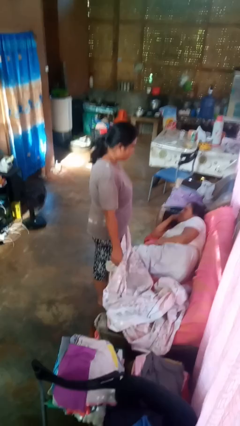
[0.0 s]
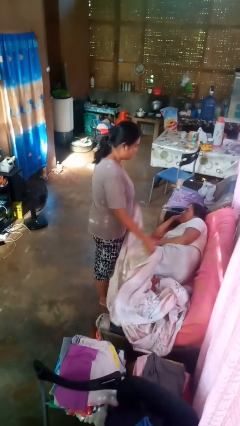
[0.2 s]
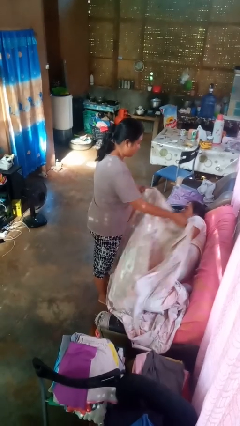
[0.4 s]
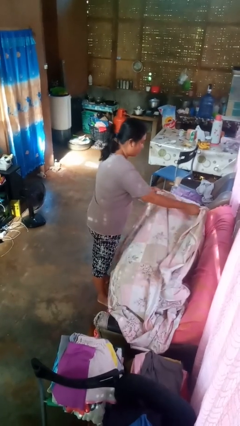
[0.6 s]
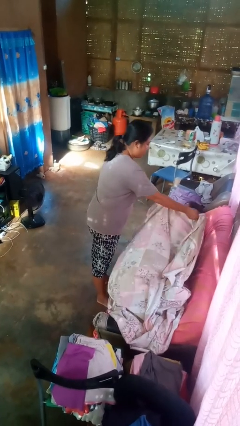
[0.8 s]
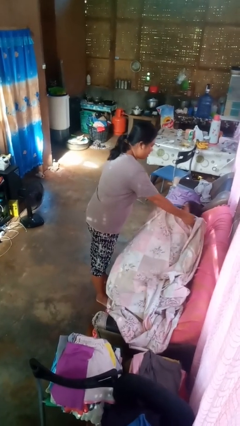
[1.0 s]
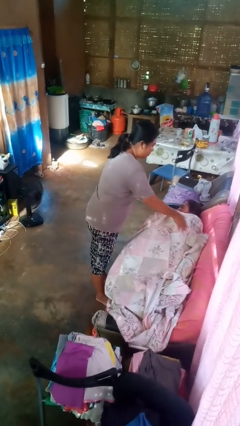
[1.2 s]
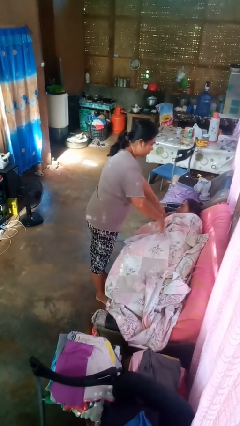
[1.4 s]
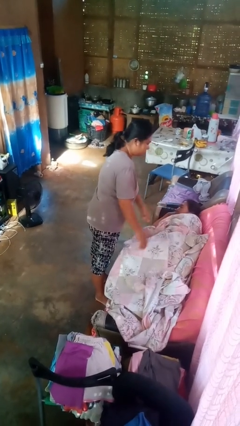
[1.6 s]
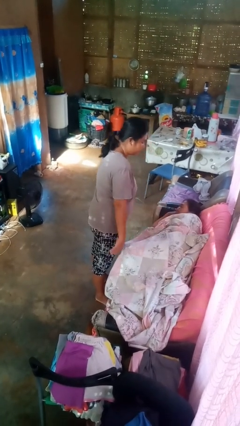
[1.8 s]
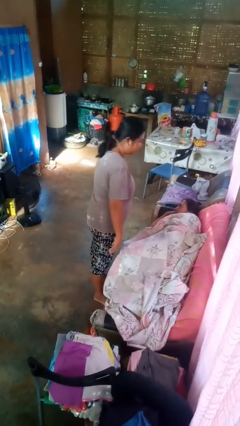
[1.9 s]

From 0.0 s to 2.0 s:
person covers friend with blanket

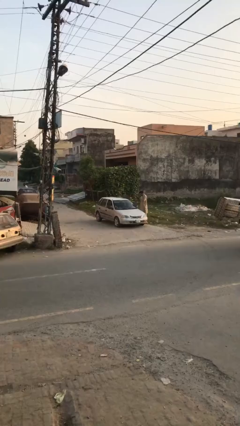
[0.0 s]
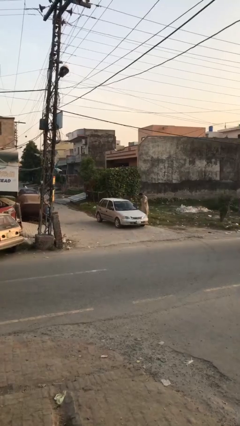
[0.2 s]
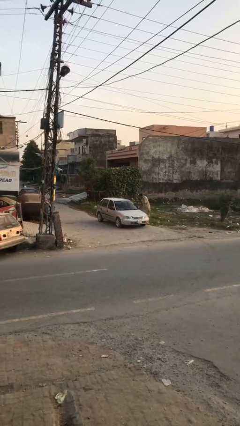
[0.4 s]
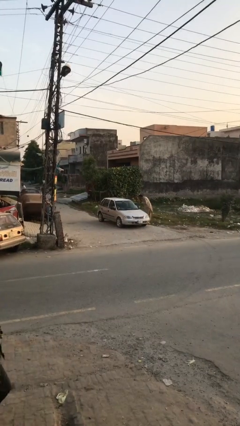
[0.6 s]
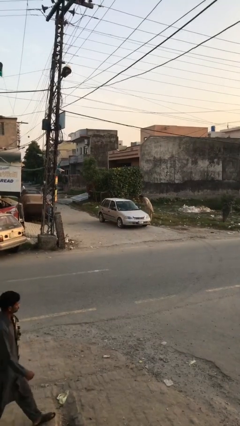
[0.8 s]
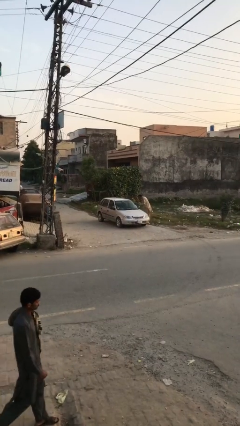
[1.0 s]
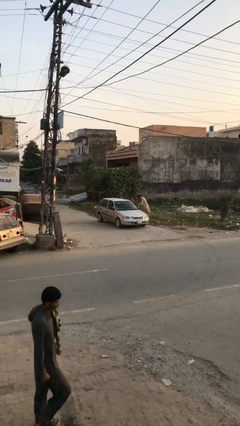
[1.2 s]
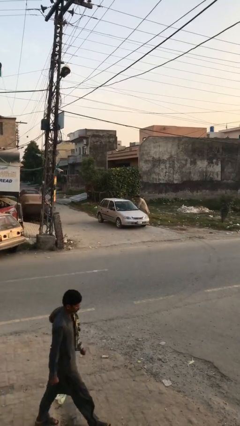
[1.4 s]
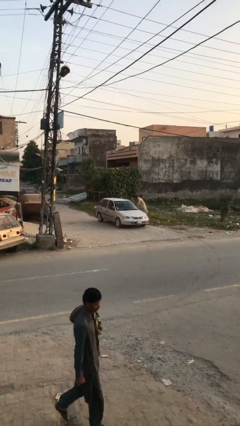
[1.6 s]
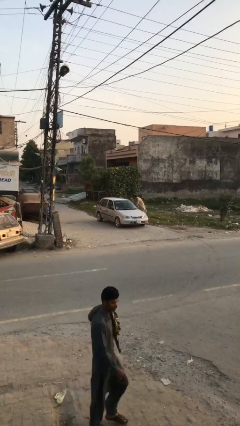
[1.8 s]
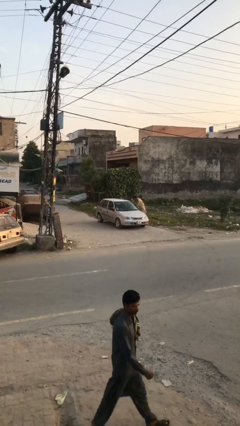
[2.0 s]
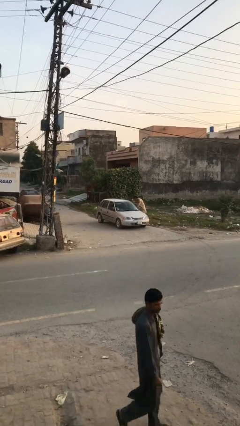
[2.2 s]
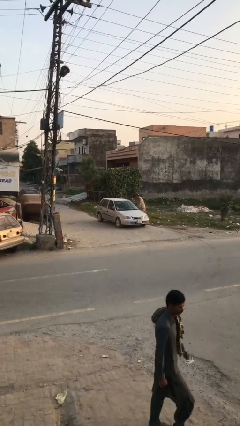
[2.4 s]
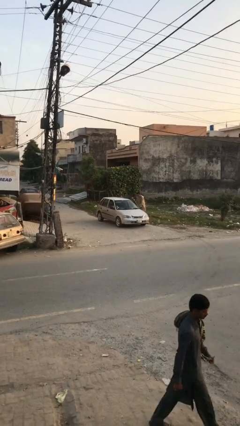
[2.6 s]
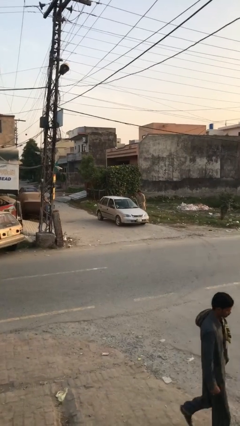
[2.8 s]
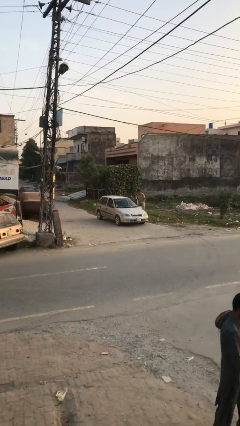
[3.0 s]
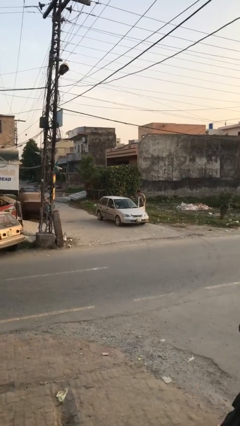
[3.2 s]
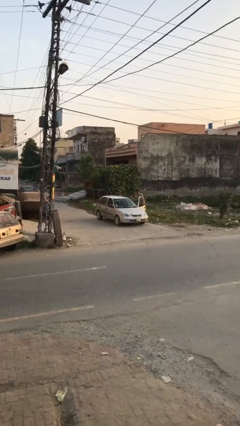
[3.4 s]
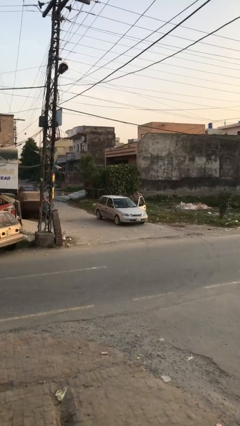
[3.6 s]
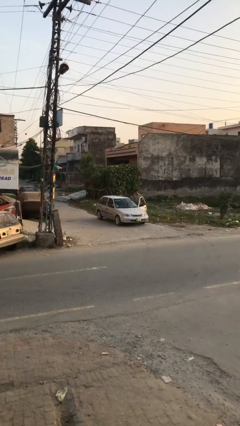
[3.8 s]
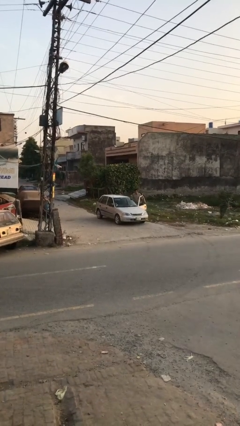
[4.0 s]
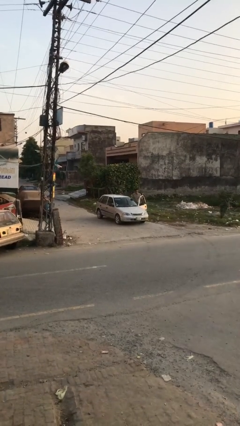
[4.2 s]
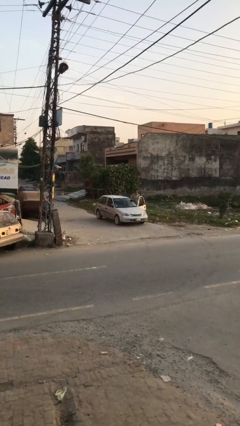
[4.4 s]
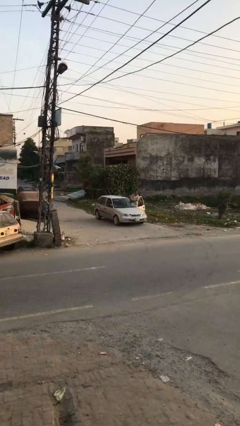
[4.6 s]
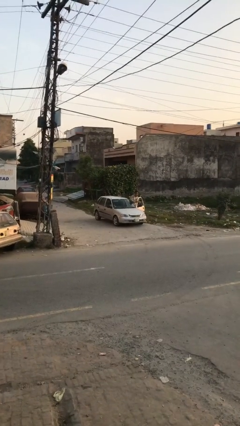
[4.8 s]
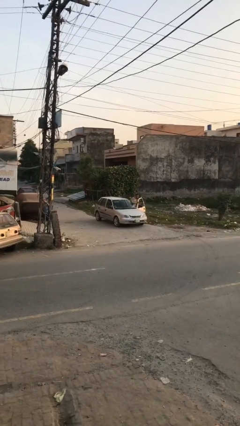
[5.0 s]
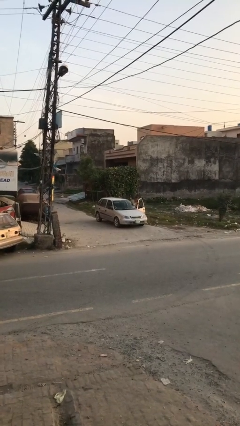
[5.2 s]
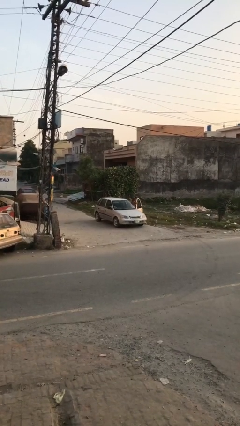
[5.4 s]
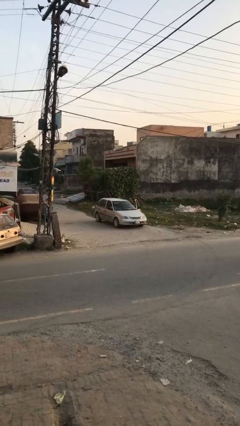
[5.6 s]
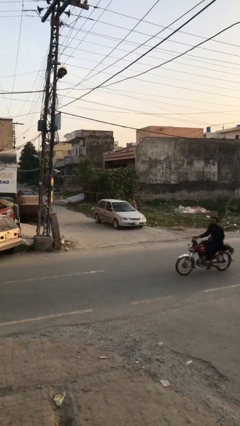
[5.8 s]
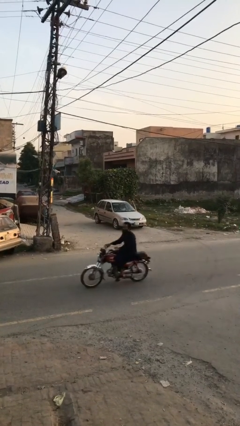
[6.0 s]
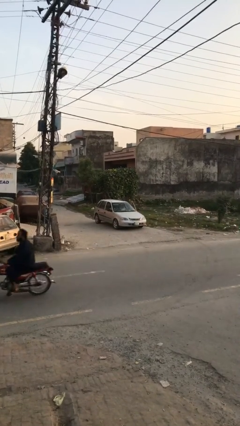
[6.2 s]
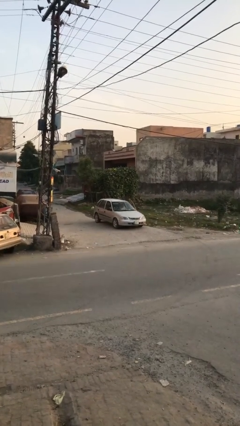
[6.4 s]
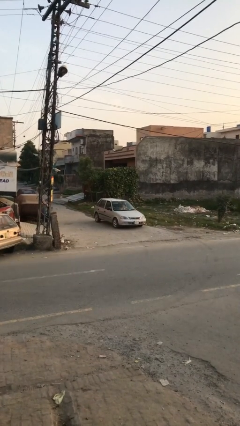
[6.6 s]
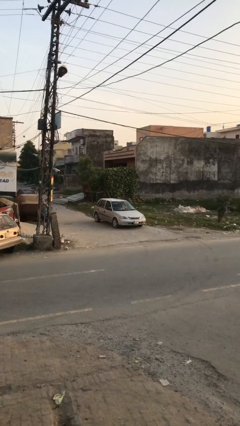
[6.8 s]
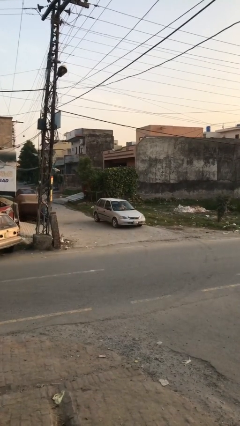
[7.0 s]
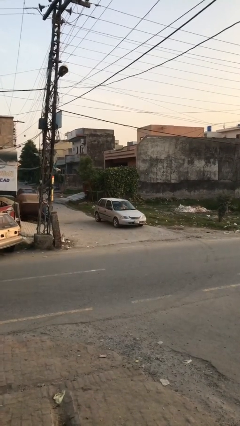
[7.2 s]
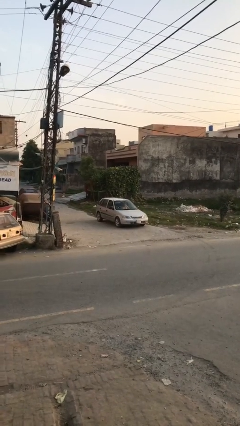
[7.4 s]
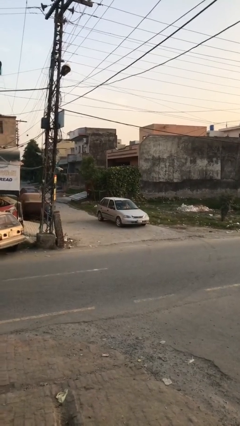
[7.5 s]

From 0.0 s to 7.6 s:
car picks up person

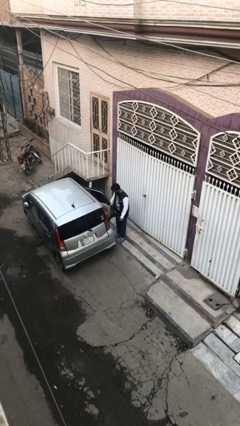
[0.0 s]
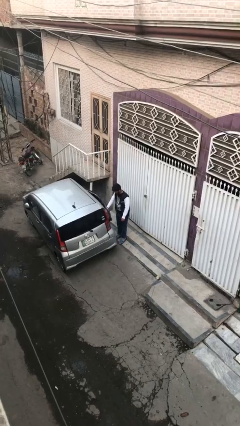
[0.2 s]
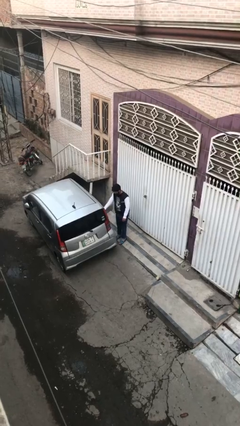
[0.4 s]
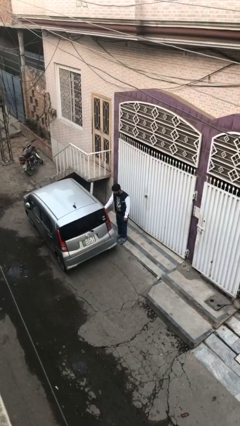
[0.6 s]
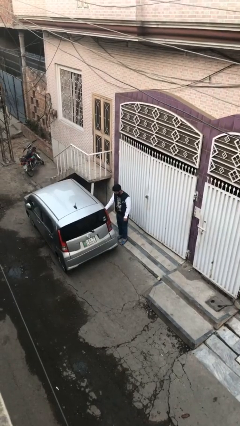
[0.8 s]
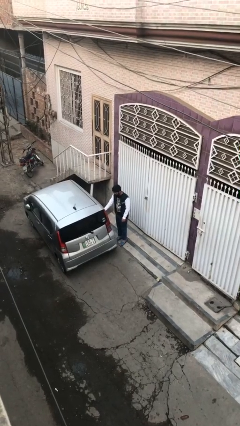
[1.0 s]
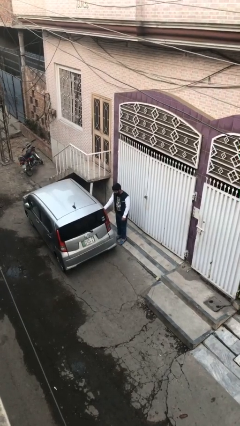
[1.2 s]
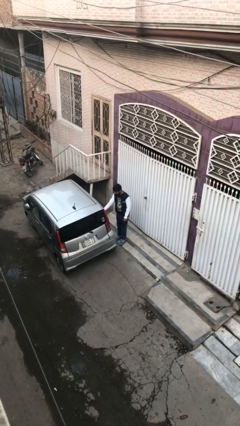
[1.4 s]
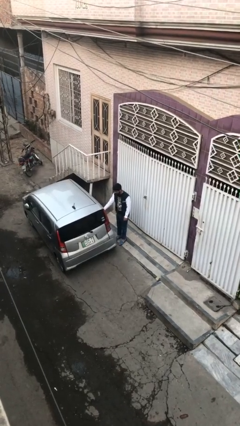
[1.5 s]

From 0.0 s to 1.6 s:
person closes car door

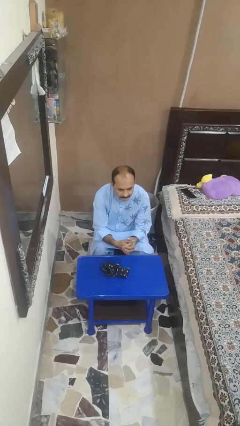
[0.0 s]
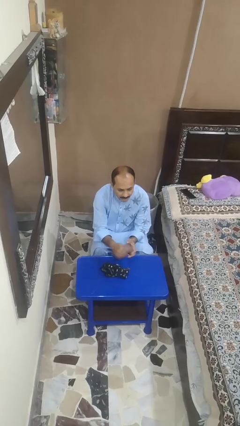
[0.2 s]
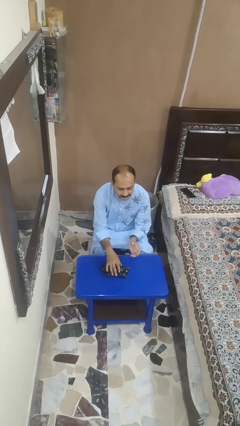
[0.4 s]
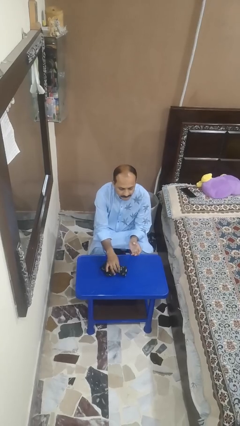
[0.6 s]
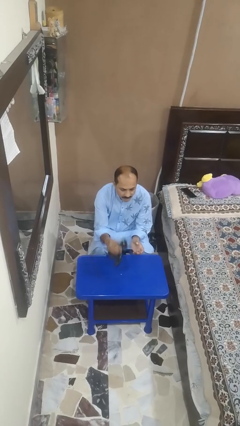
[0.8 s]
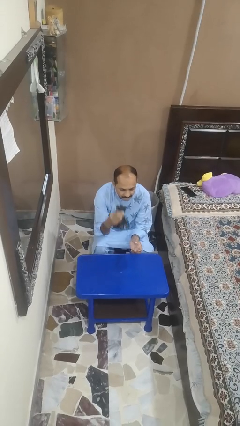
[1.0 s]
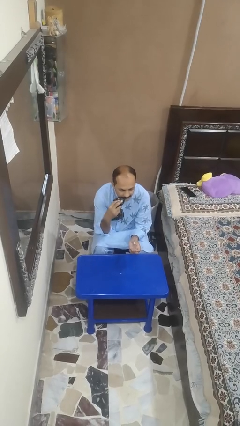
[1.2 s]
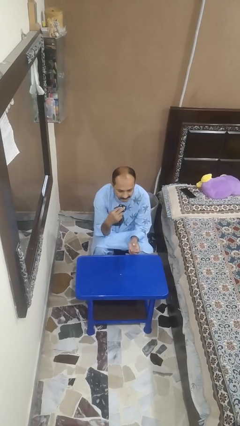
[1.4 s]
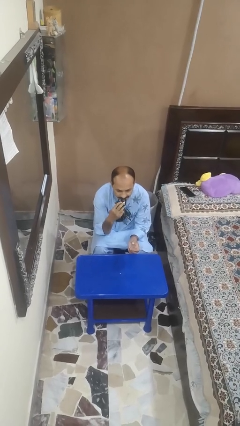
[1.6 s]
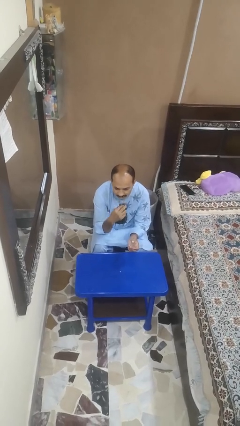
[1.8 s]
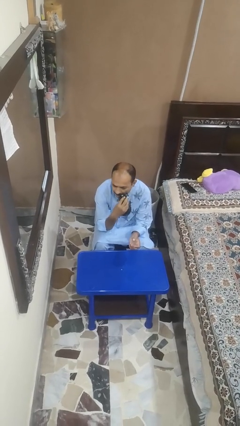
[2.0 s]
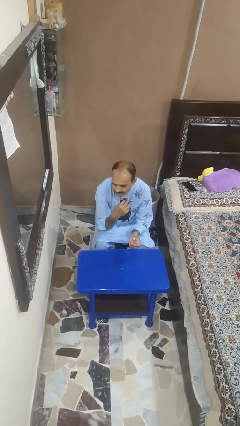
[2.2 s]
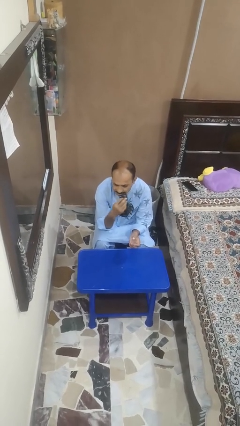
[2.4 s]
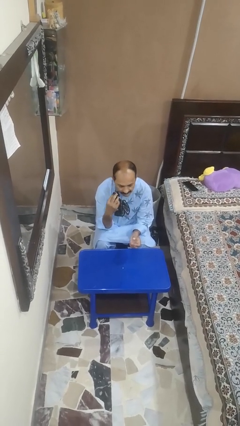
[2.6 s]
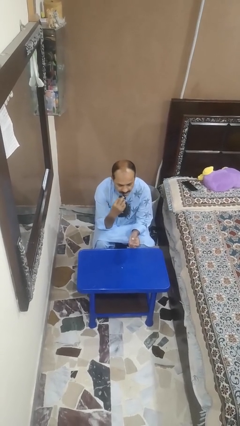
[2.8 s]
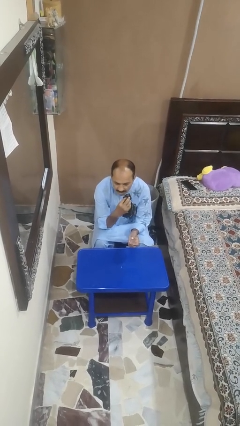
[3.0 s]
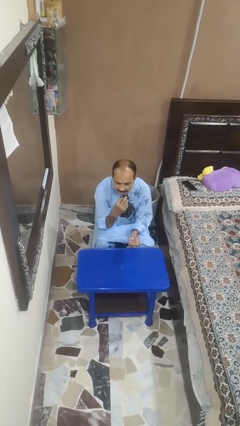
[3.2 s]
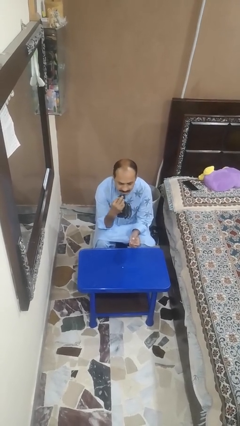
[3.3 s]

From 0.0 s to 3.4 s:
person wipes mouth with napkin

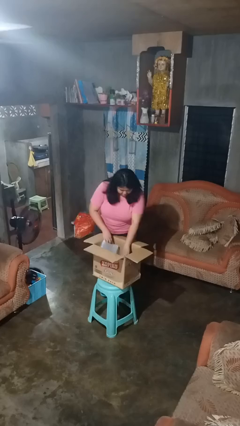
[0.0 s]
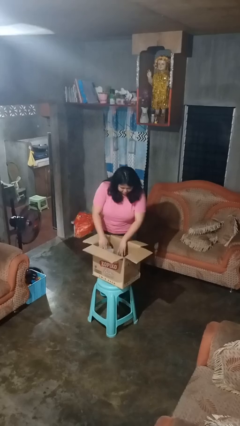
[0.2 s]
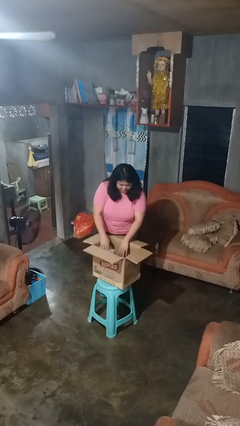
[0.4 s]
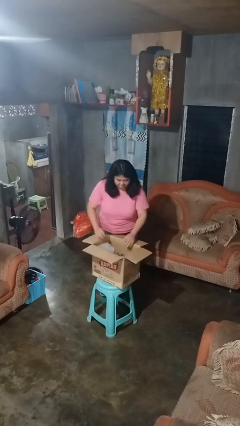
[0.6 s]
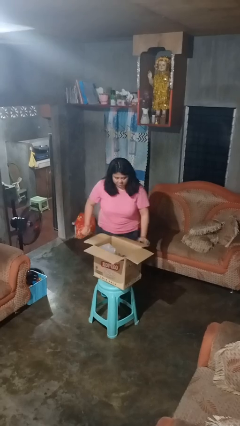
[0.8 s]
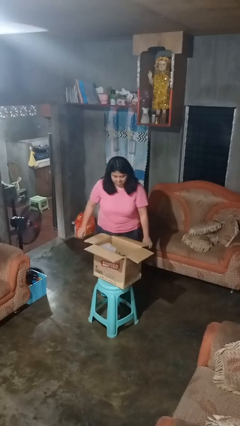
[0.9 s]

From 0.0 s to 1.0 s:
person searches in box

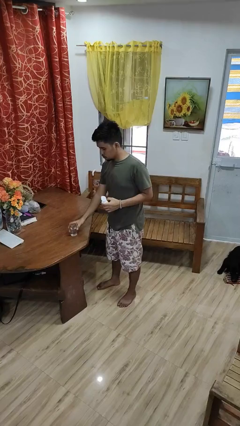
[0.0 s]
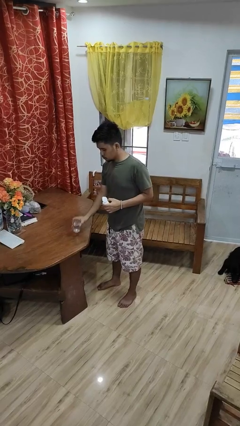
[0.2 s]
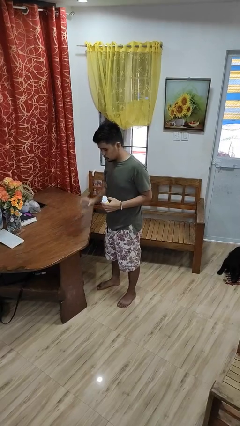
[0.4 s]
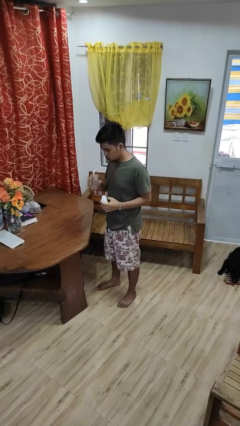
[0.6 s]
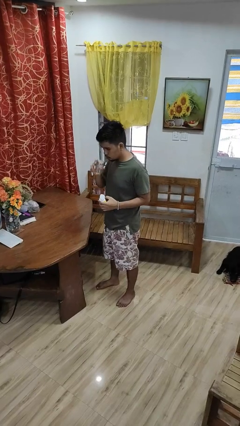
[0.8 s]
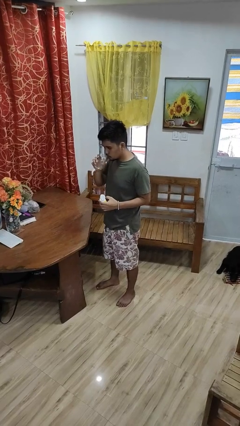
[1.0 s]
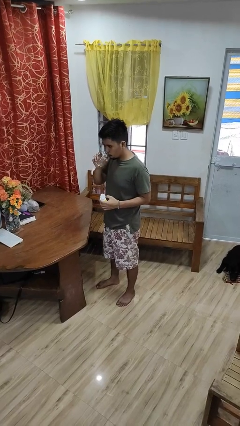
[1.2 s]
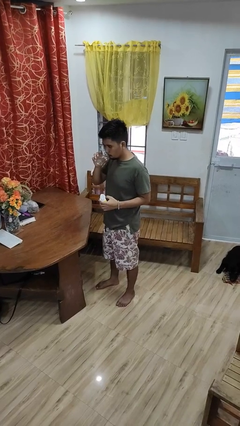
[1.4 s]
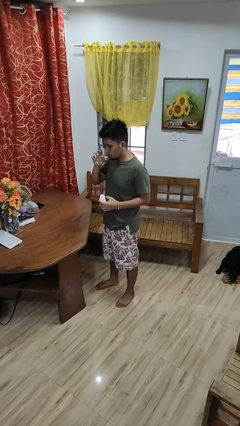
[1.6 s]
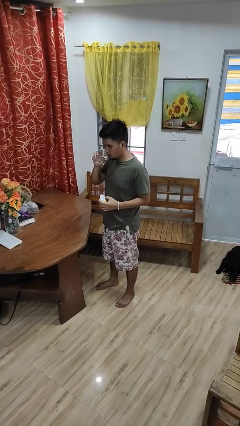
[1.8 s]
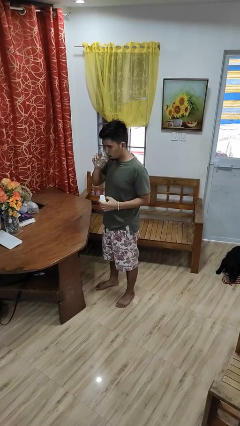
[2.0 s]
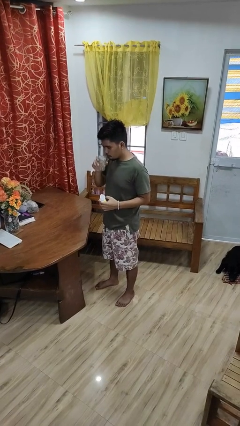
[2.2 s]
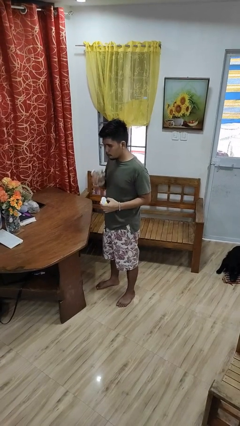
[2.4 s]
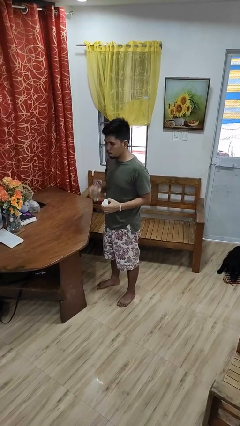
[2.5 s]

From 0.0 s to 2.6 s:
person drinks from cup
